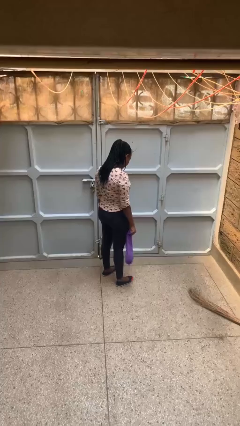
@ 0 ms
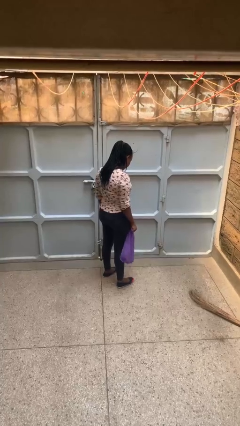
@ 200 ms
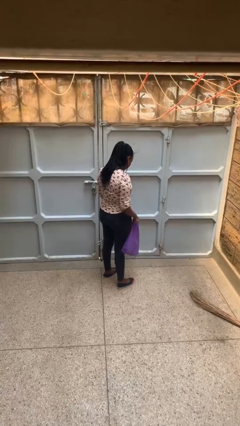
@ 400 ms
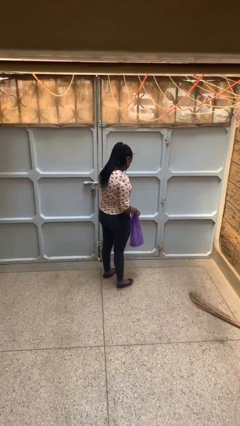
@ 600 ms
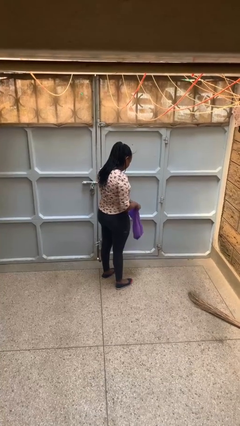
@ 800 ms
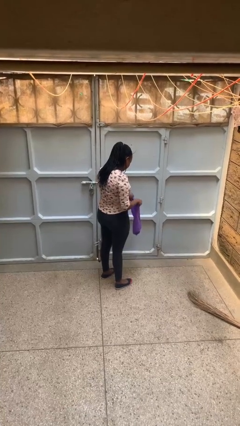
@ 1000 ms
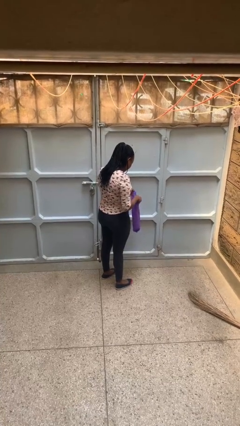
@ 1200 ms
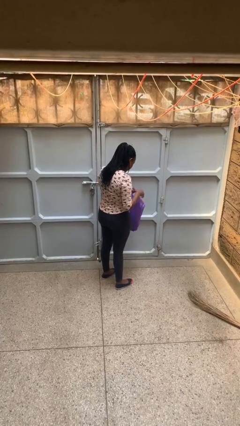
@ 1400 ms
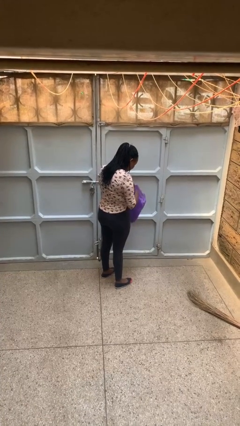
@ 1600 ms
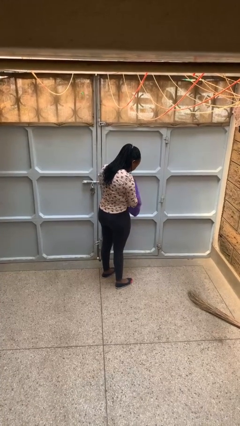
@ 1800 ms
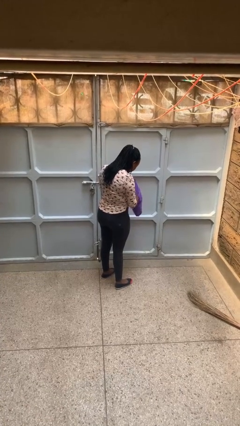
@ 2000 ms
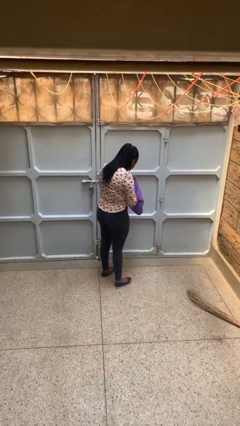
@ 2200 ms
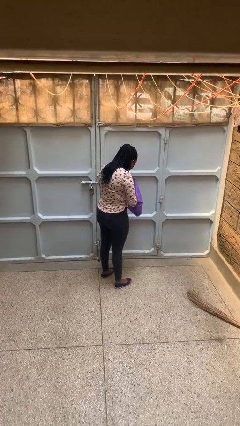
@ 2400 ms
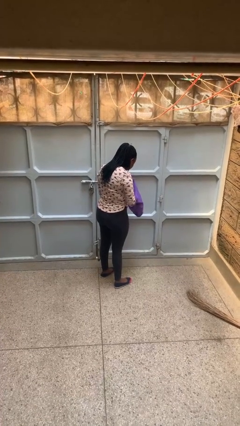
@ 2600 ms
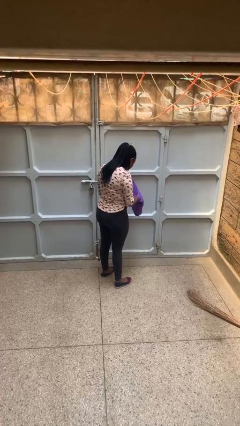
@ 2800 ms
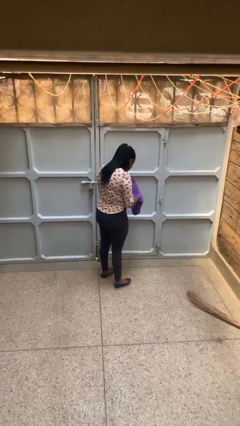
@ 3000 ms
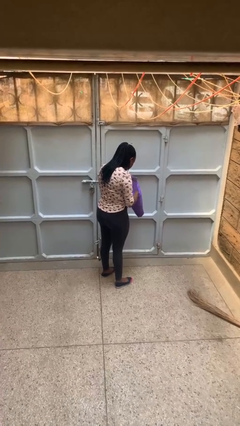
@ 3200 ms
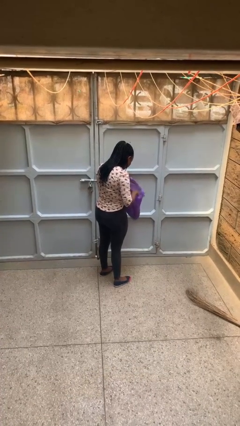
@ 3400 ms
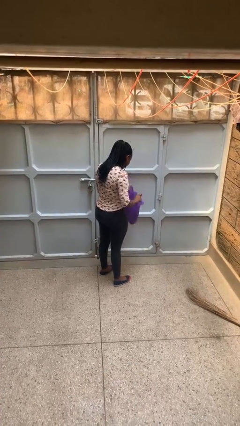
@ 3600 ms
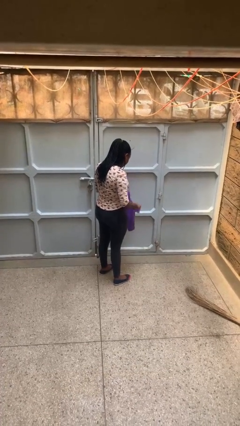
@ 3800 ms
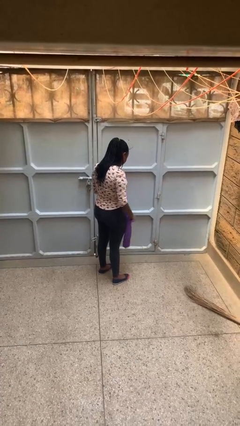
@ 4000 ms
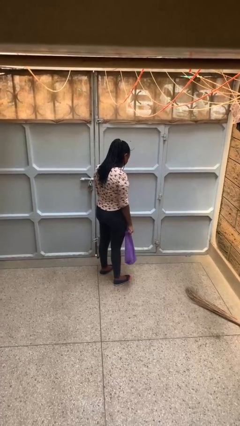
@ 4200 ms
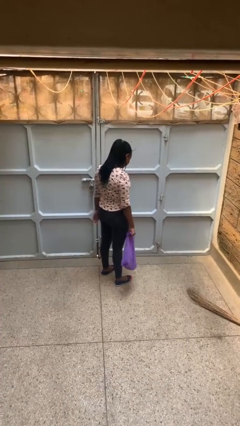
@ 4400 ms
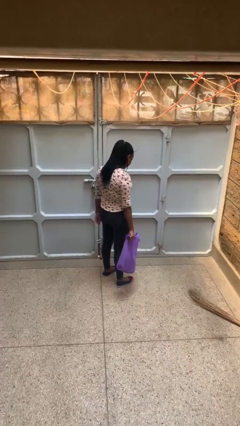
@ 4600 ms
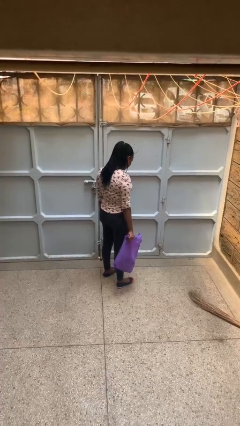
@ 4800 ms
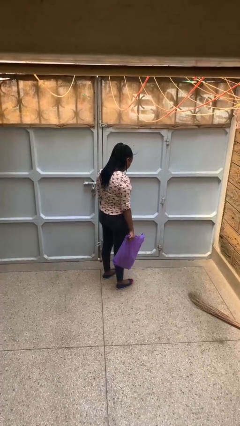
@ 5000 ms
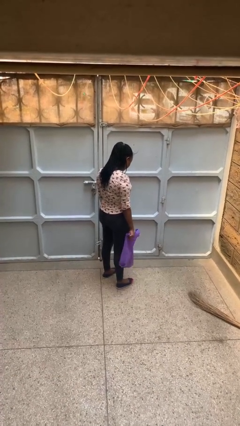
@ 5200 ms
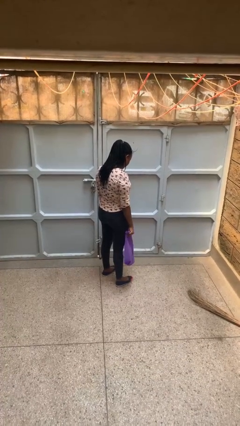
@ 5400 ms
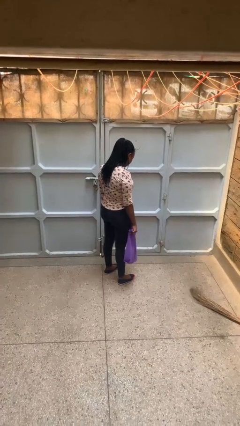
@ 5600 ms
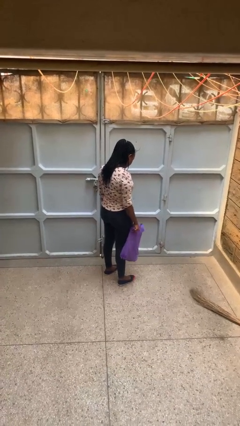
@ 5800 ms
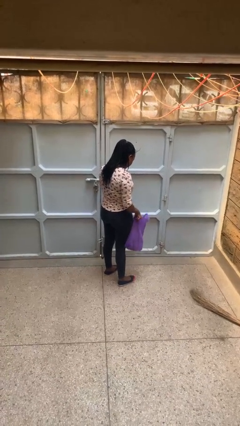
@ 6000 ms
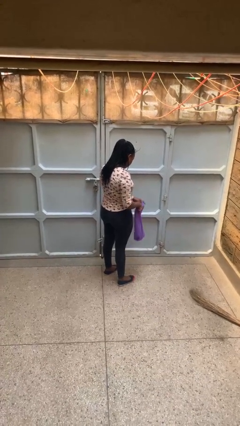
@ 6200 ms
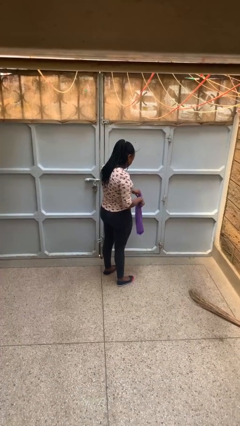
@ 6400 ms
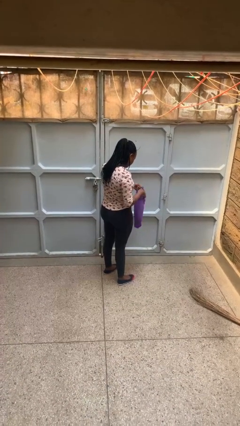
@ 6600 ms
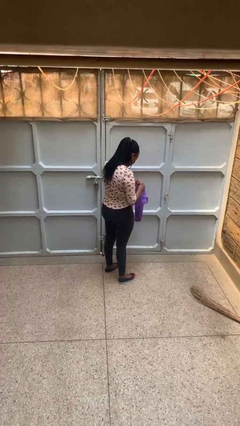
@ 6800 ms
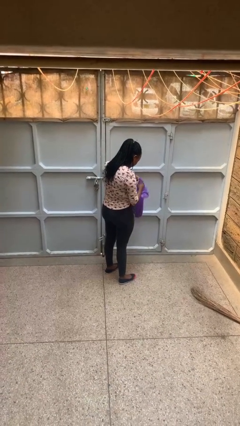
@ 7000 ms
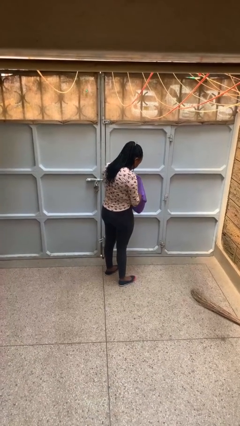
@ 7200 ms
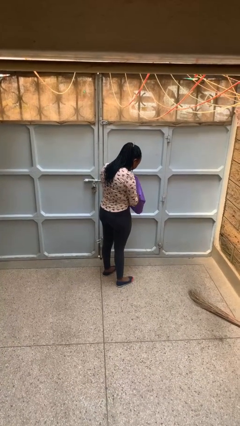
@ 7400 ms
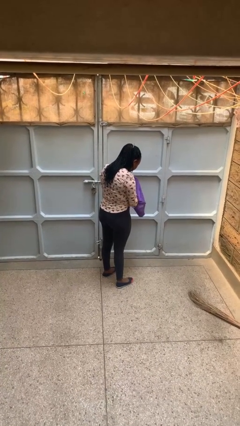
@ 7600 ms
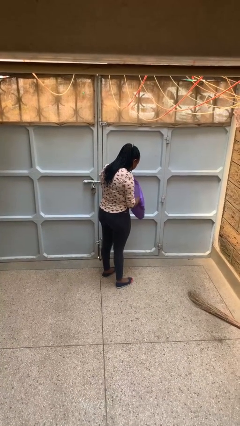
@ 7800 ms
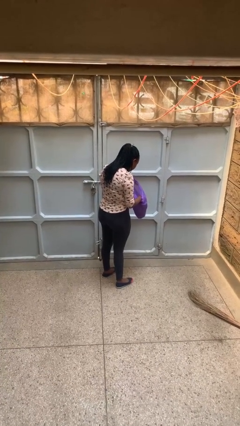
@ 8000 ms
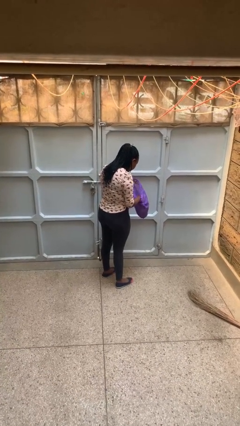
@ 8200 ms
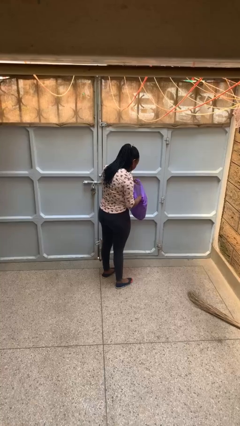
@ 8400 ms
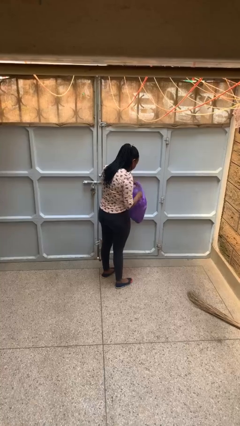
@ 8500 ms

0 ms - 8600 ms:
person searches in bag

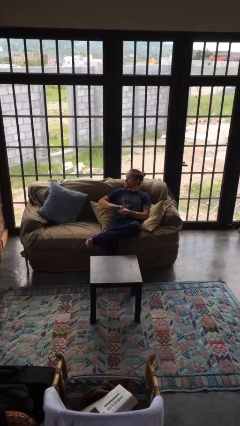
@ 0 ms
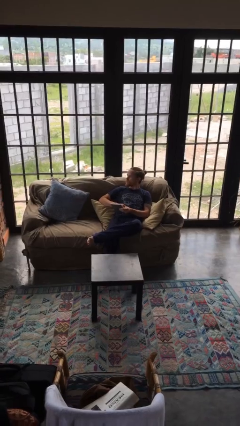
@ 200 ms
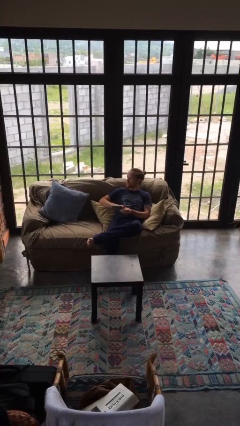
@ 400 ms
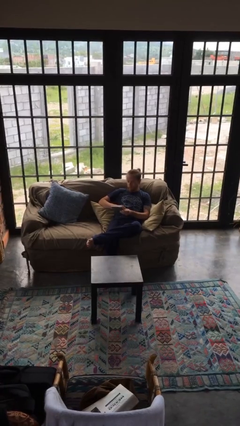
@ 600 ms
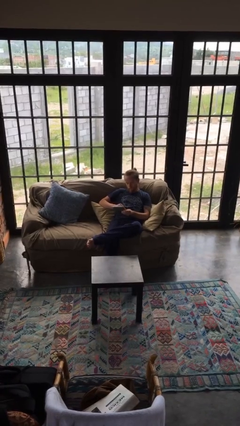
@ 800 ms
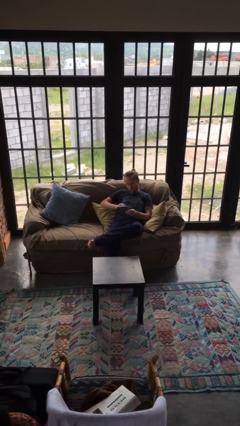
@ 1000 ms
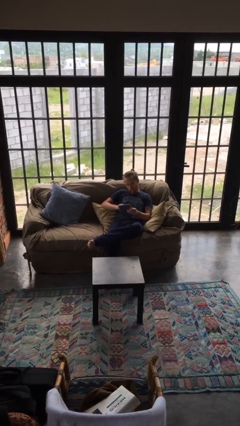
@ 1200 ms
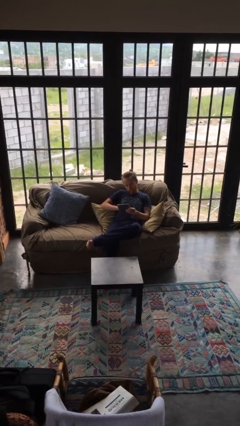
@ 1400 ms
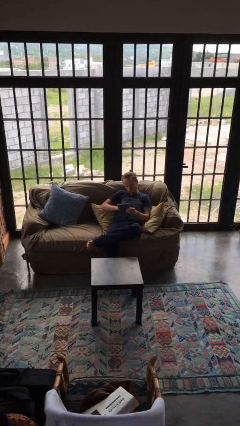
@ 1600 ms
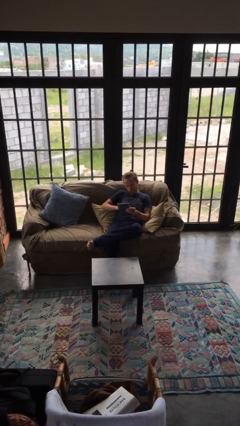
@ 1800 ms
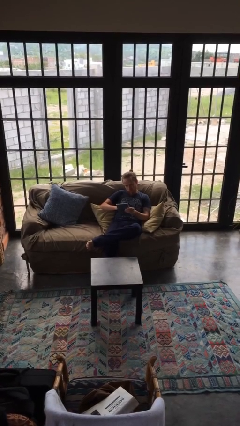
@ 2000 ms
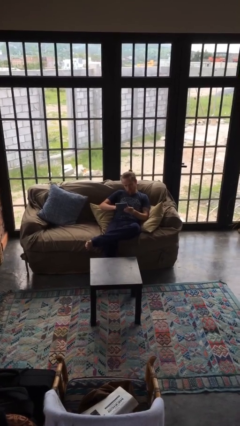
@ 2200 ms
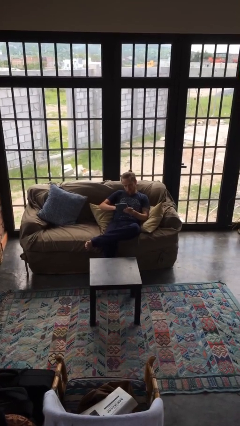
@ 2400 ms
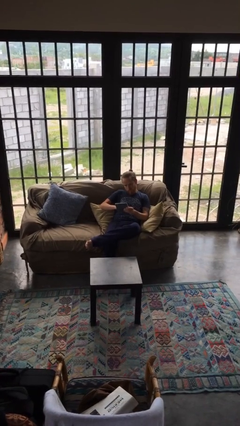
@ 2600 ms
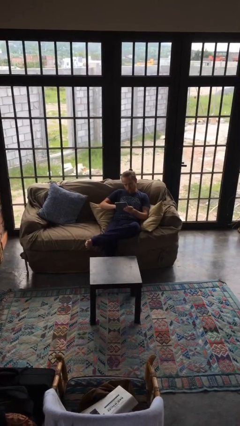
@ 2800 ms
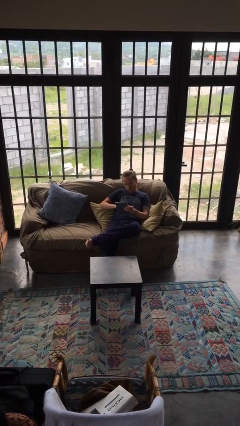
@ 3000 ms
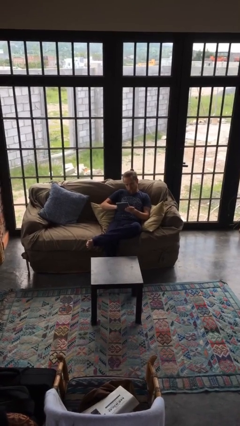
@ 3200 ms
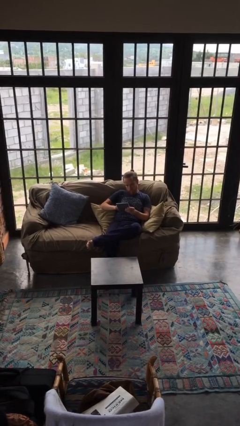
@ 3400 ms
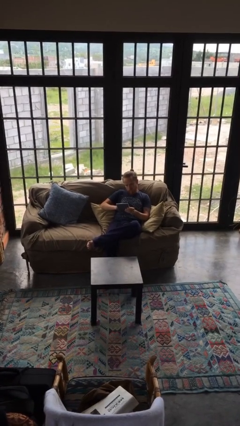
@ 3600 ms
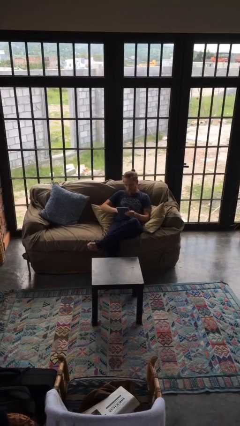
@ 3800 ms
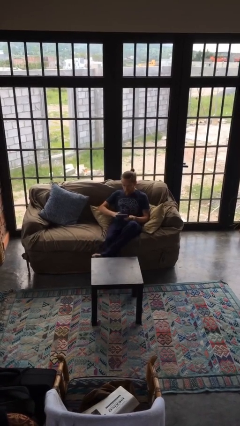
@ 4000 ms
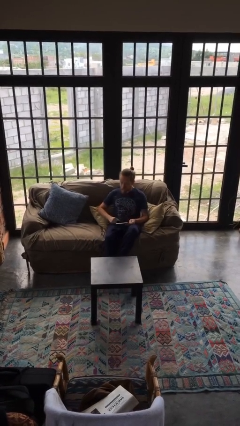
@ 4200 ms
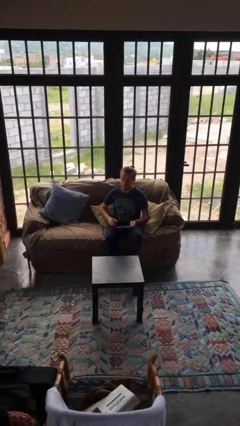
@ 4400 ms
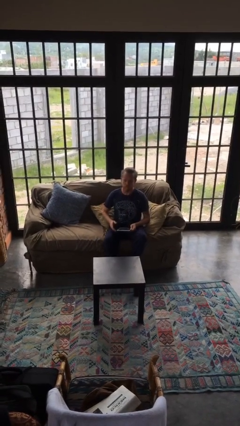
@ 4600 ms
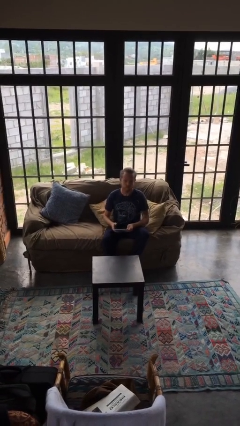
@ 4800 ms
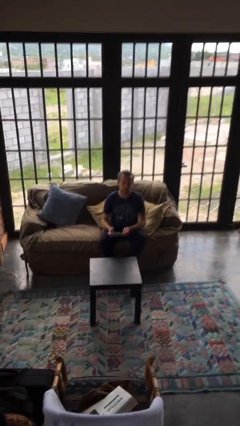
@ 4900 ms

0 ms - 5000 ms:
person interacts with tablet

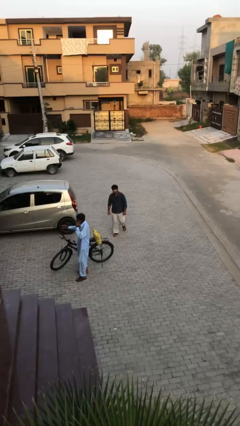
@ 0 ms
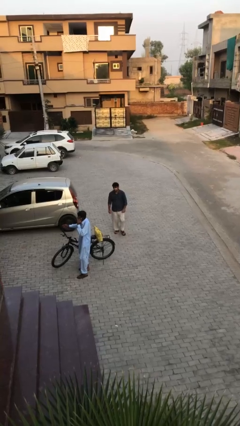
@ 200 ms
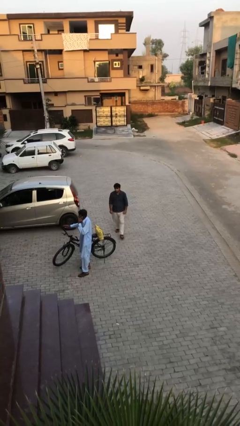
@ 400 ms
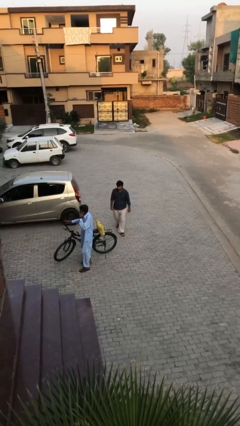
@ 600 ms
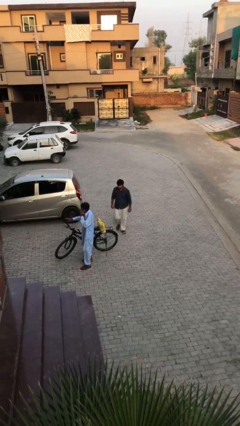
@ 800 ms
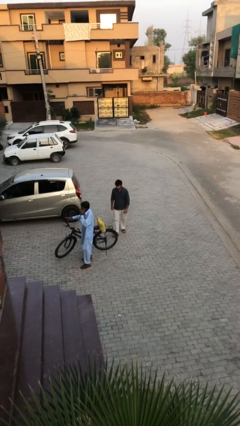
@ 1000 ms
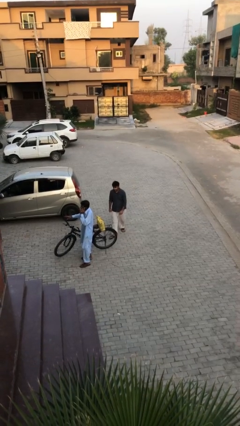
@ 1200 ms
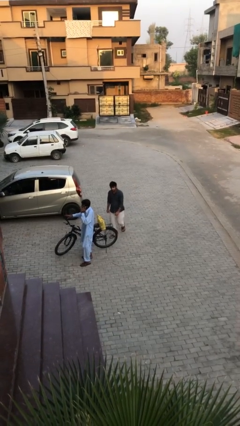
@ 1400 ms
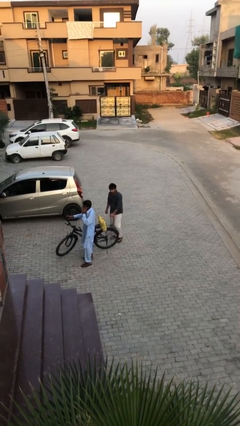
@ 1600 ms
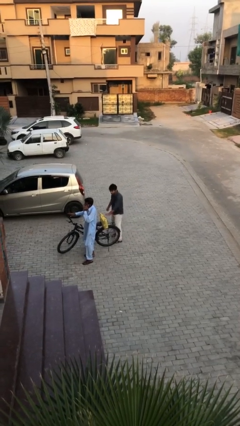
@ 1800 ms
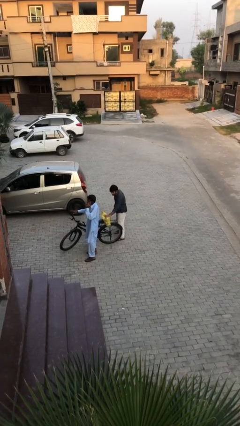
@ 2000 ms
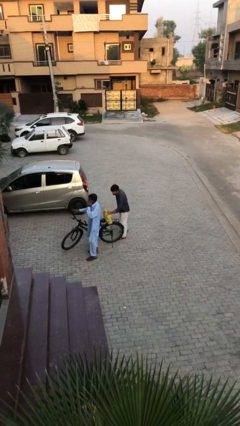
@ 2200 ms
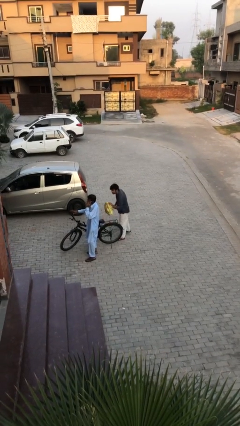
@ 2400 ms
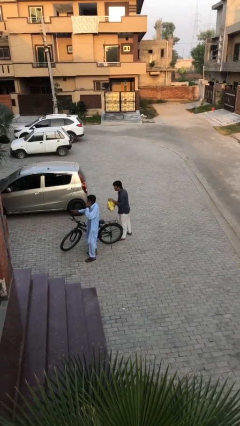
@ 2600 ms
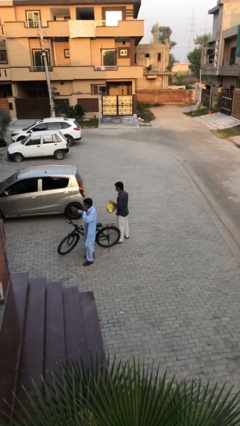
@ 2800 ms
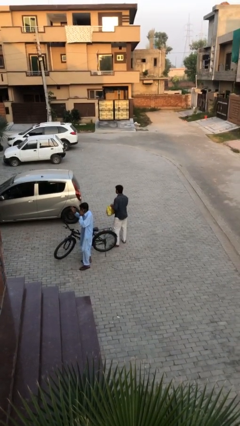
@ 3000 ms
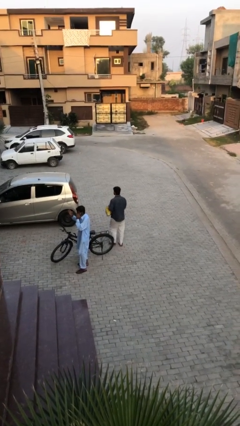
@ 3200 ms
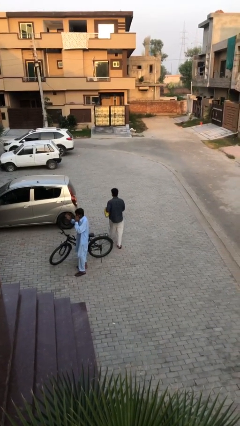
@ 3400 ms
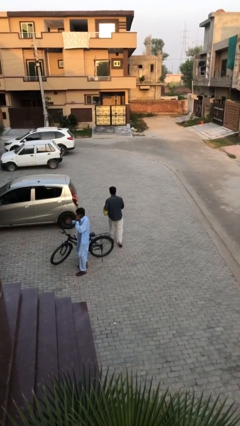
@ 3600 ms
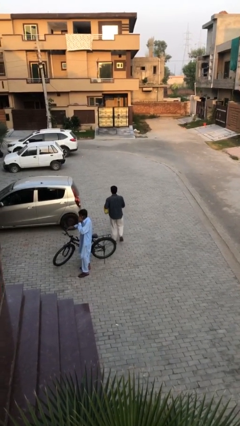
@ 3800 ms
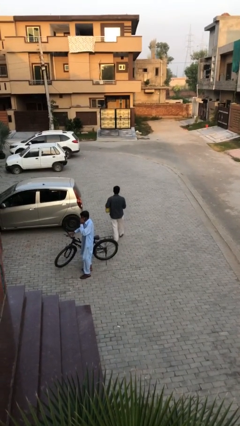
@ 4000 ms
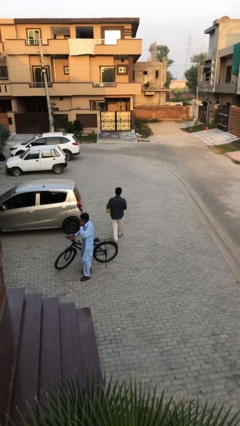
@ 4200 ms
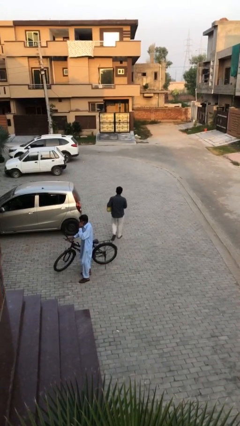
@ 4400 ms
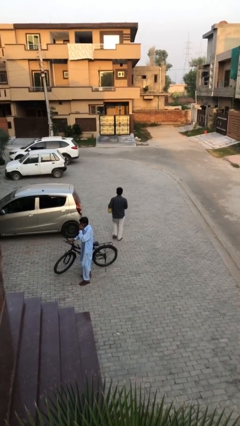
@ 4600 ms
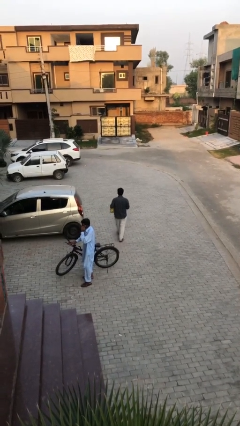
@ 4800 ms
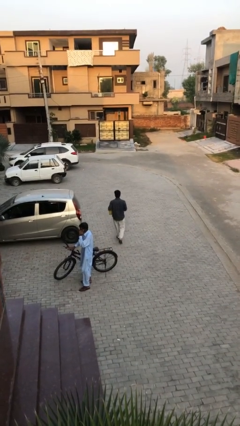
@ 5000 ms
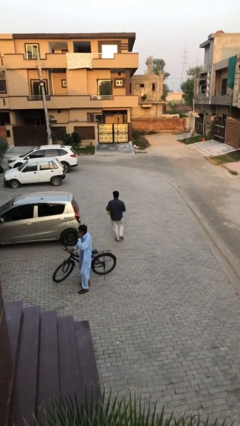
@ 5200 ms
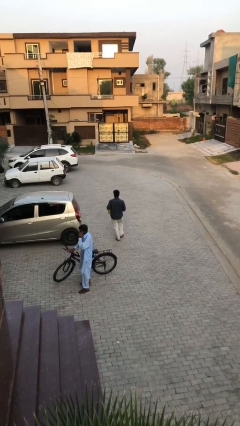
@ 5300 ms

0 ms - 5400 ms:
person steals object from person
